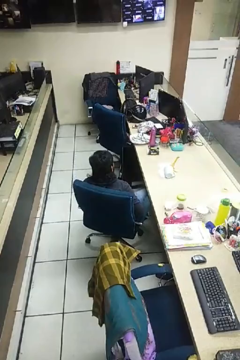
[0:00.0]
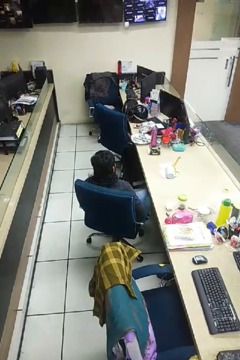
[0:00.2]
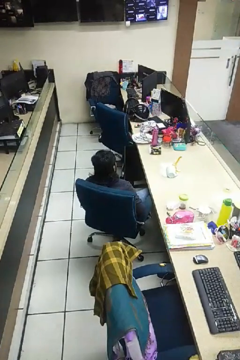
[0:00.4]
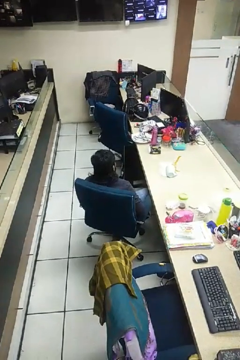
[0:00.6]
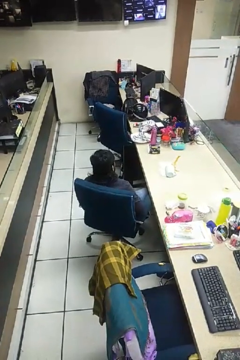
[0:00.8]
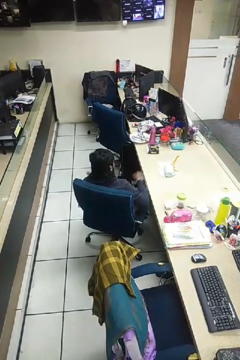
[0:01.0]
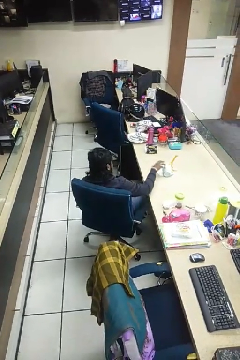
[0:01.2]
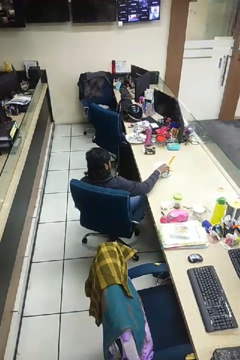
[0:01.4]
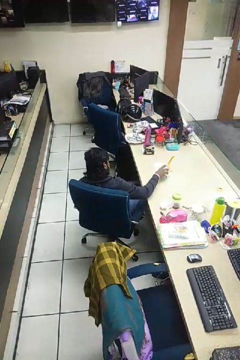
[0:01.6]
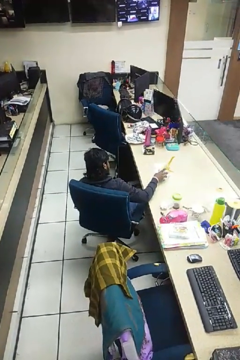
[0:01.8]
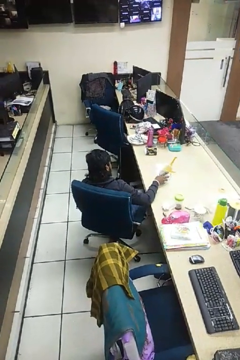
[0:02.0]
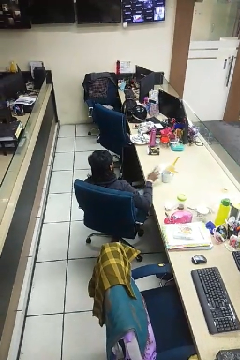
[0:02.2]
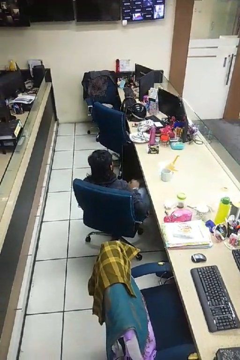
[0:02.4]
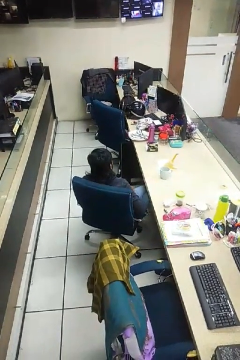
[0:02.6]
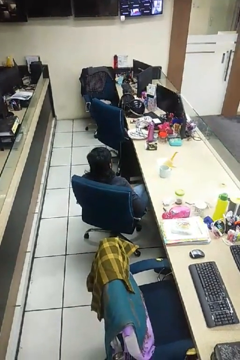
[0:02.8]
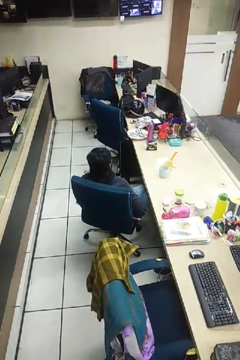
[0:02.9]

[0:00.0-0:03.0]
person sets upright glass

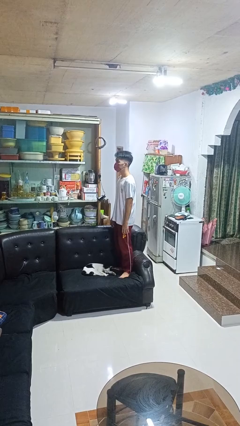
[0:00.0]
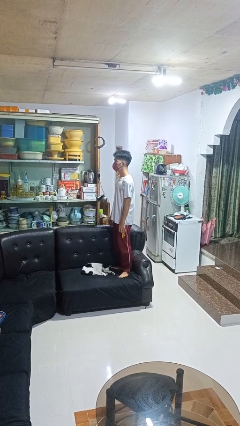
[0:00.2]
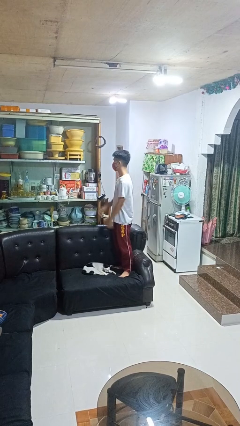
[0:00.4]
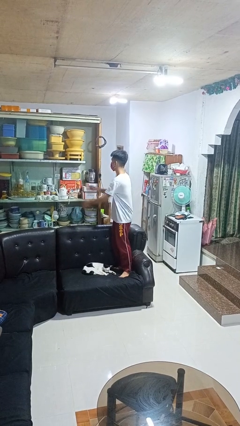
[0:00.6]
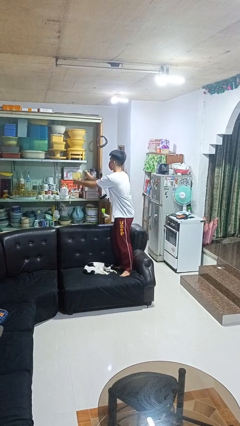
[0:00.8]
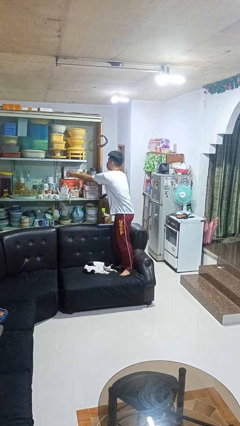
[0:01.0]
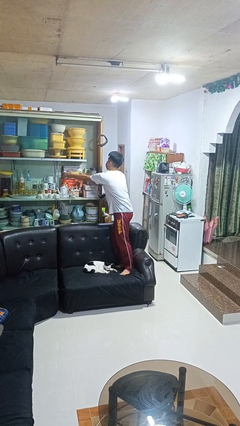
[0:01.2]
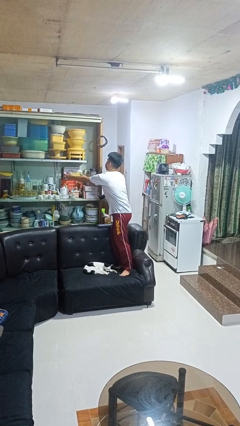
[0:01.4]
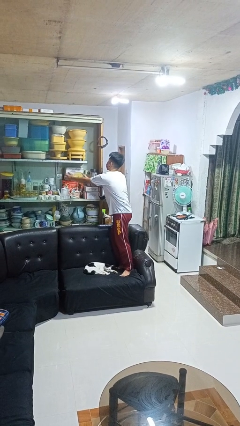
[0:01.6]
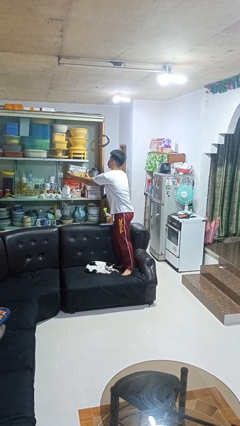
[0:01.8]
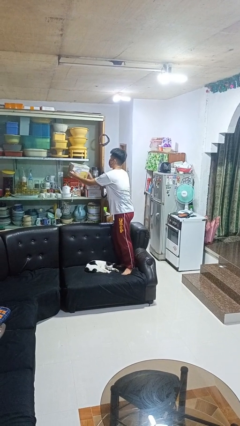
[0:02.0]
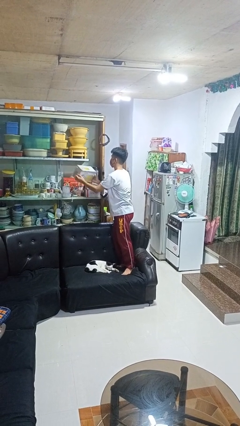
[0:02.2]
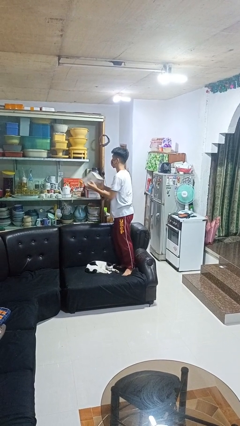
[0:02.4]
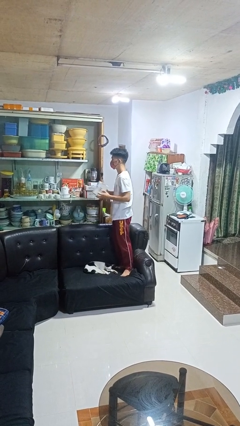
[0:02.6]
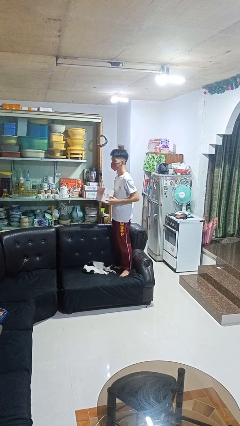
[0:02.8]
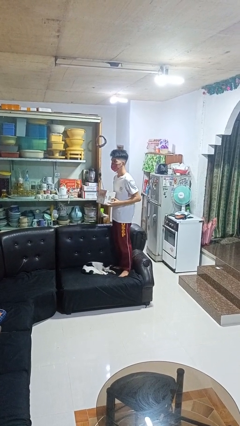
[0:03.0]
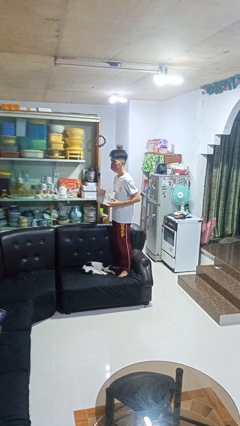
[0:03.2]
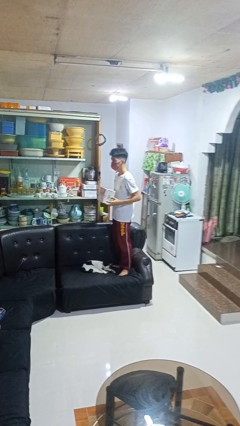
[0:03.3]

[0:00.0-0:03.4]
person picks up object from cabinet

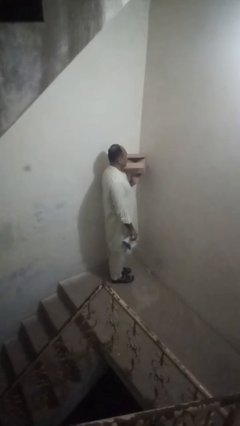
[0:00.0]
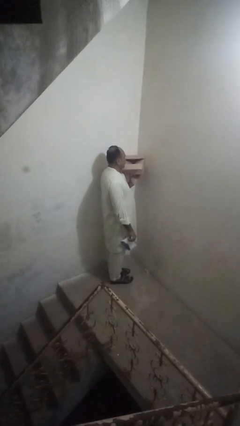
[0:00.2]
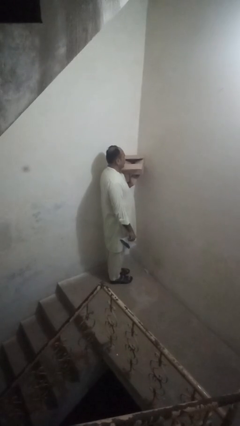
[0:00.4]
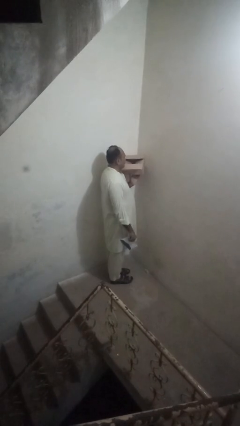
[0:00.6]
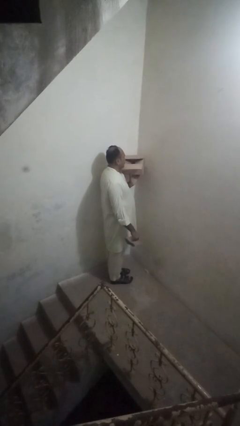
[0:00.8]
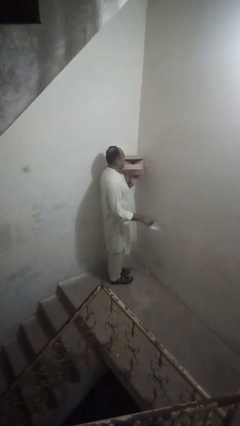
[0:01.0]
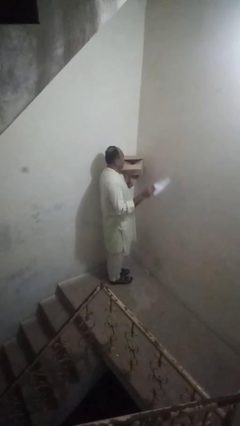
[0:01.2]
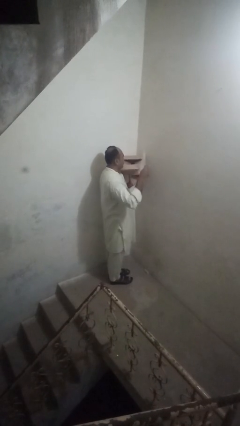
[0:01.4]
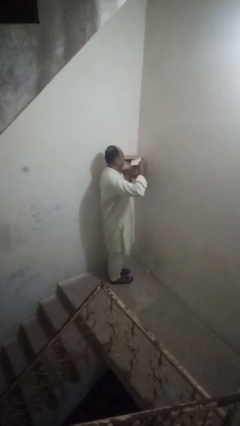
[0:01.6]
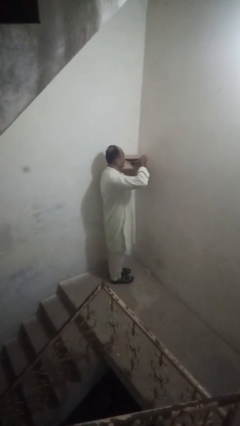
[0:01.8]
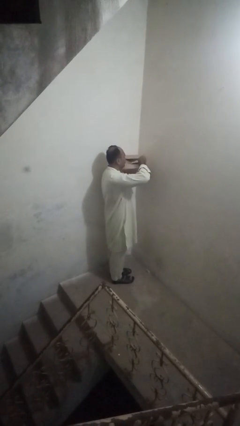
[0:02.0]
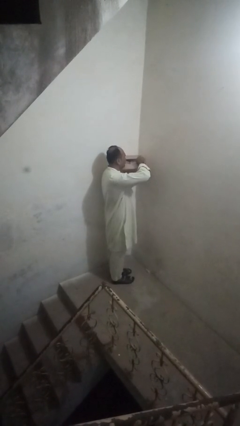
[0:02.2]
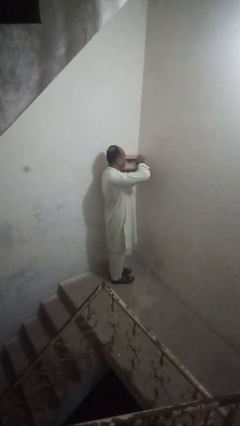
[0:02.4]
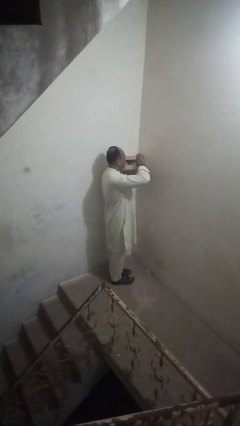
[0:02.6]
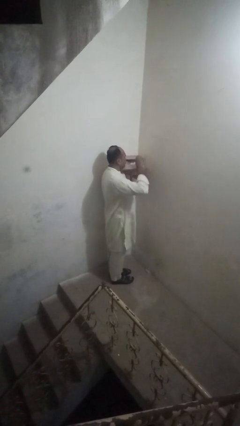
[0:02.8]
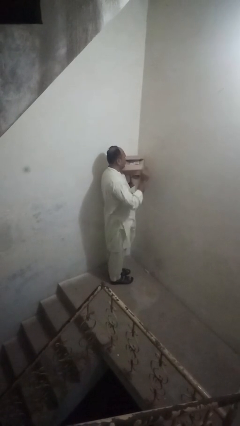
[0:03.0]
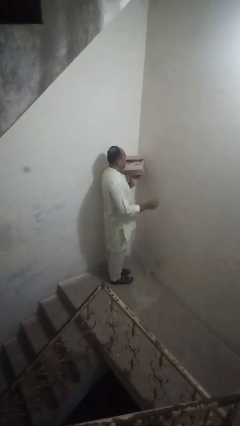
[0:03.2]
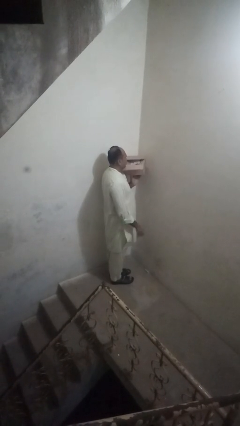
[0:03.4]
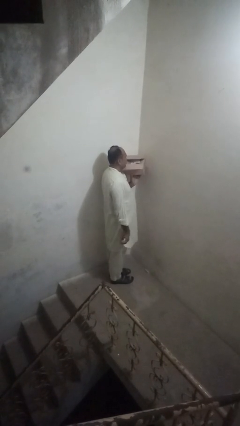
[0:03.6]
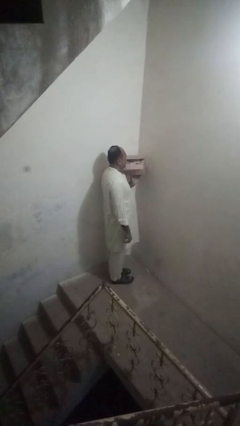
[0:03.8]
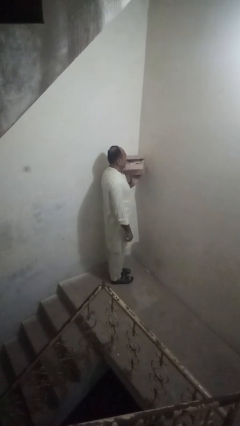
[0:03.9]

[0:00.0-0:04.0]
person puts letters in mailbox

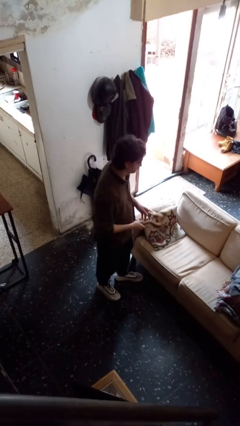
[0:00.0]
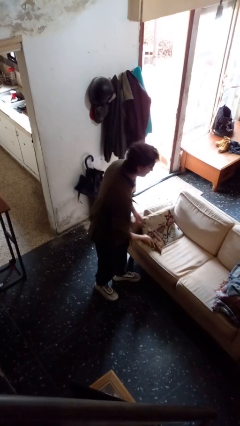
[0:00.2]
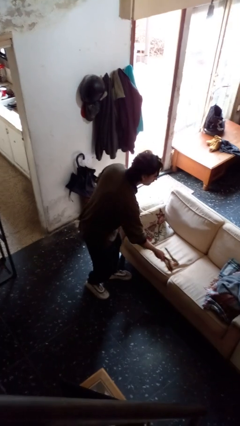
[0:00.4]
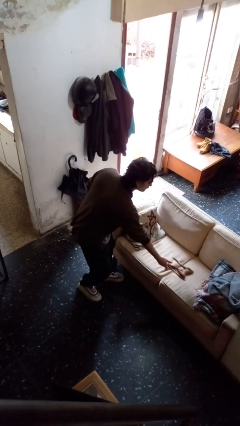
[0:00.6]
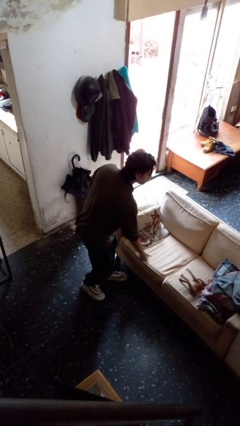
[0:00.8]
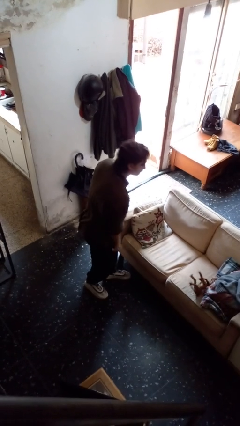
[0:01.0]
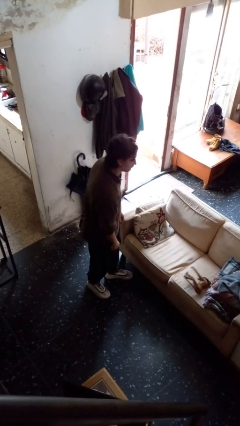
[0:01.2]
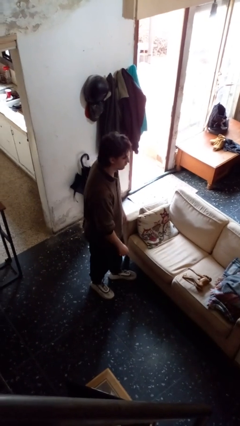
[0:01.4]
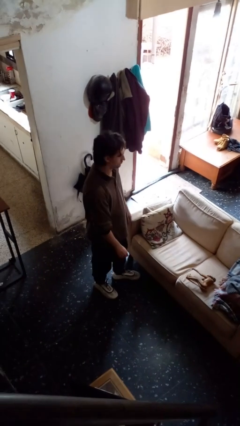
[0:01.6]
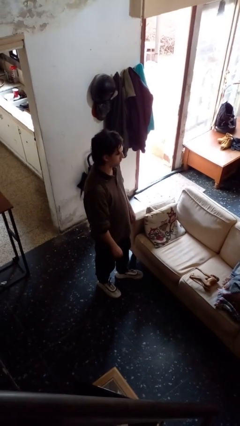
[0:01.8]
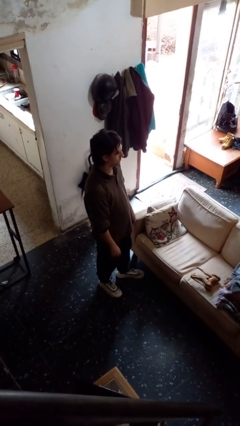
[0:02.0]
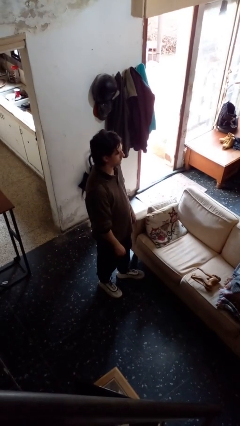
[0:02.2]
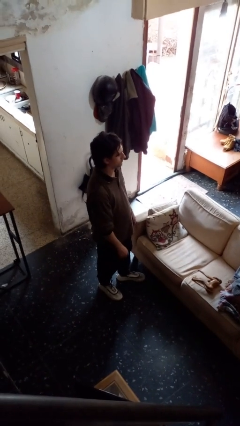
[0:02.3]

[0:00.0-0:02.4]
person puts down object on couch

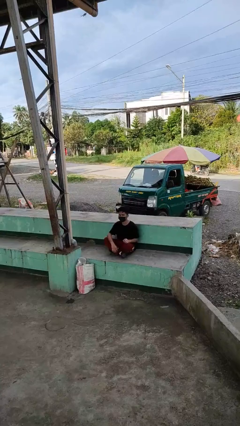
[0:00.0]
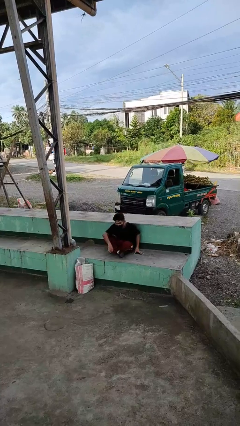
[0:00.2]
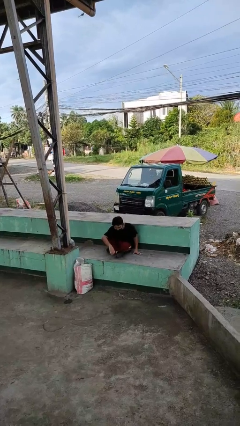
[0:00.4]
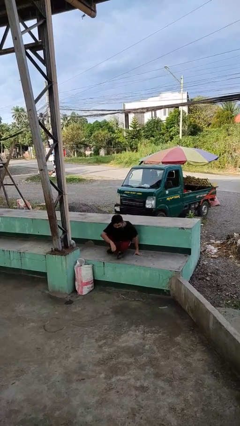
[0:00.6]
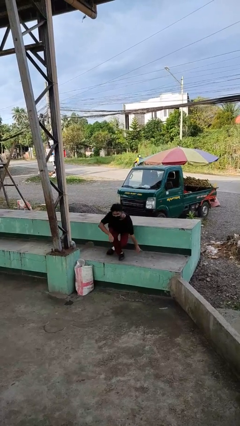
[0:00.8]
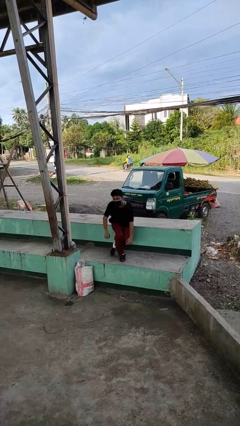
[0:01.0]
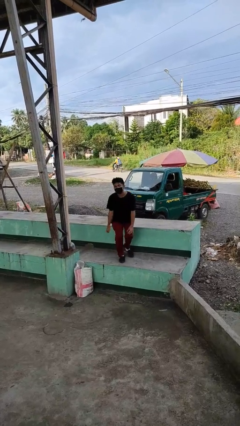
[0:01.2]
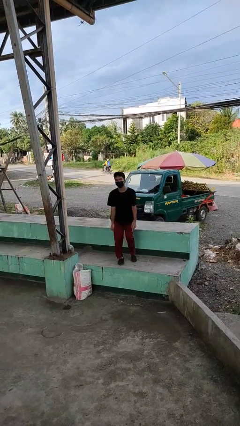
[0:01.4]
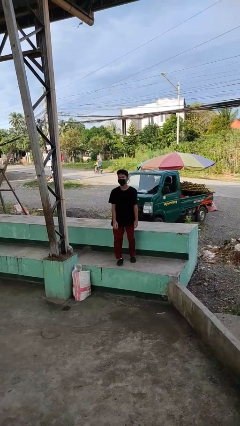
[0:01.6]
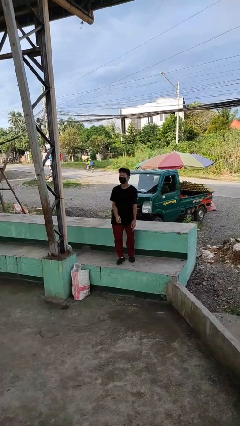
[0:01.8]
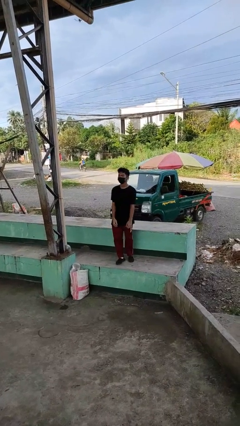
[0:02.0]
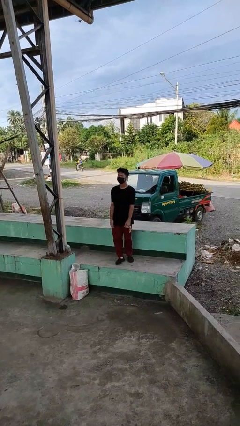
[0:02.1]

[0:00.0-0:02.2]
person stands up from floor

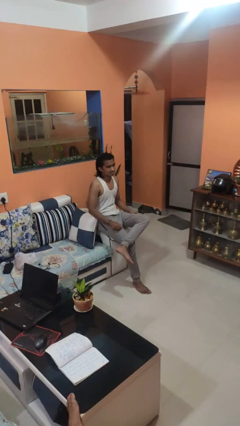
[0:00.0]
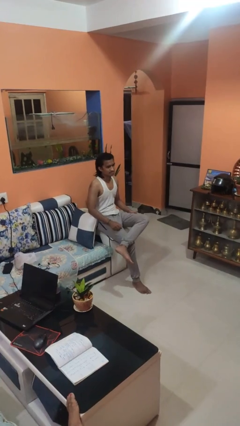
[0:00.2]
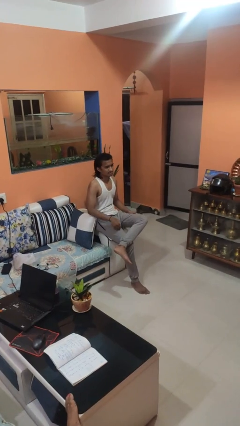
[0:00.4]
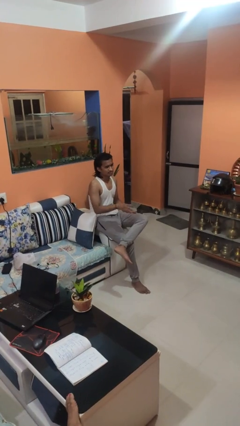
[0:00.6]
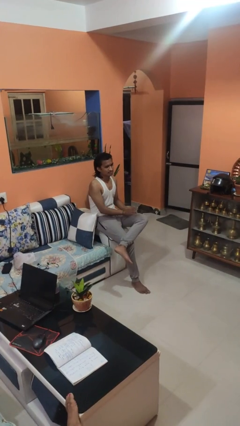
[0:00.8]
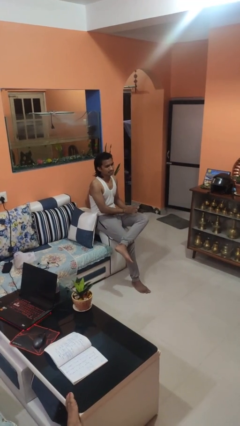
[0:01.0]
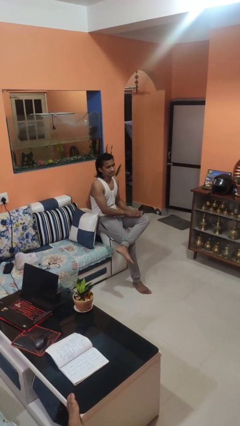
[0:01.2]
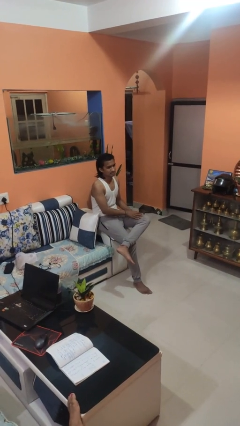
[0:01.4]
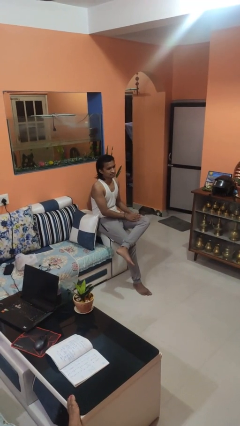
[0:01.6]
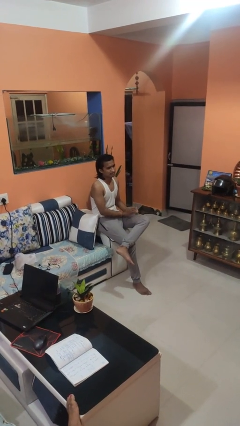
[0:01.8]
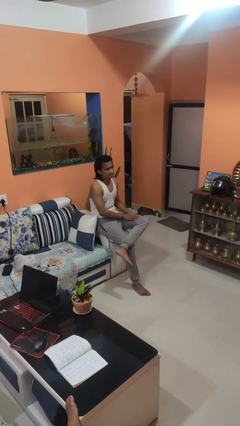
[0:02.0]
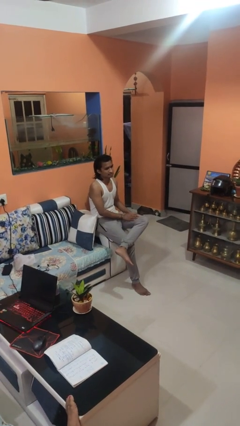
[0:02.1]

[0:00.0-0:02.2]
person slaps hands on thighs

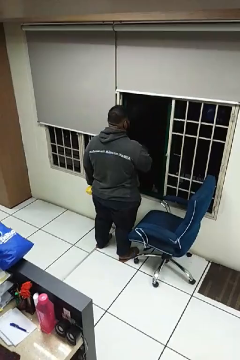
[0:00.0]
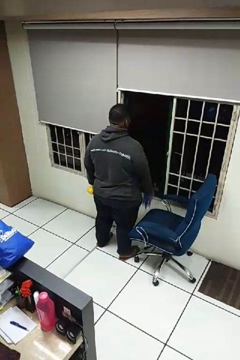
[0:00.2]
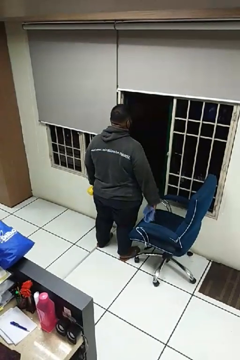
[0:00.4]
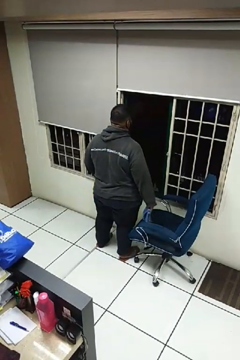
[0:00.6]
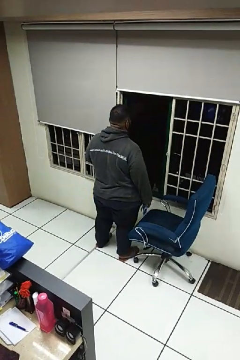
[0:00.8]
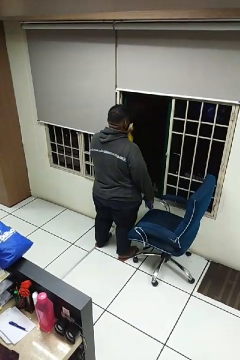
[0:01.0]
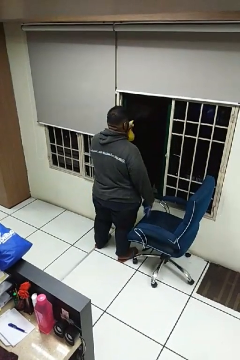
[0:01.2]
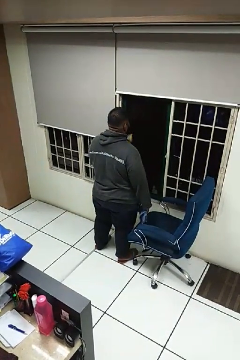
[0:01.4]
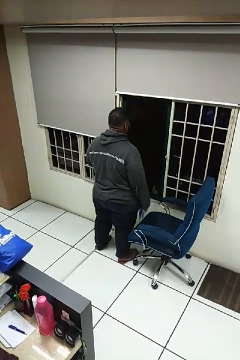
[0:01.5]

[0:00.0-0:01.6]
person sprays from bottle
